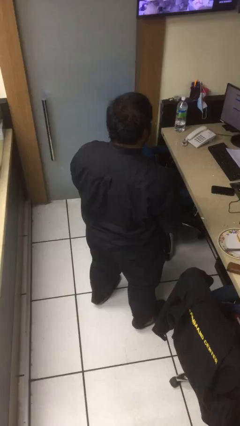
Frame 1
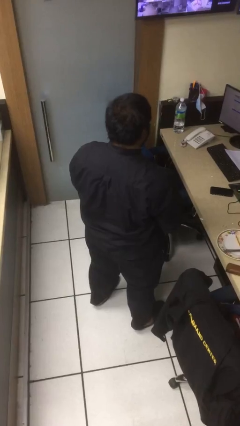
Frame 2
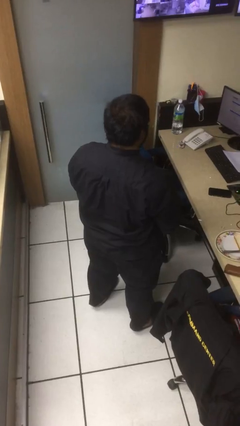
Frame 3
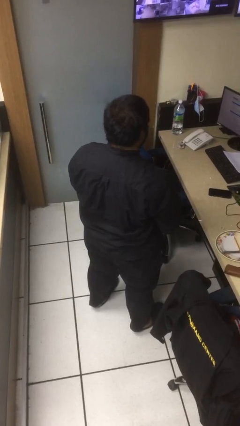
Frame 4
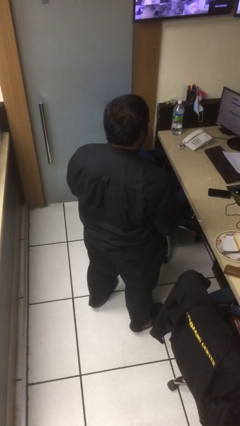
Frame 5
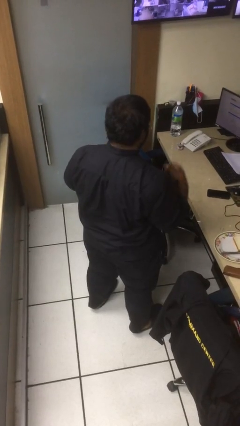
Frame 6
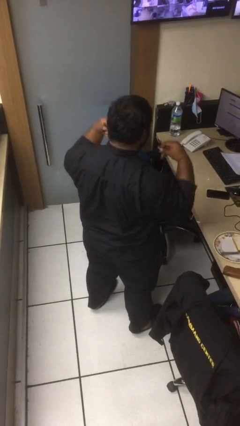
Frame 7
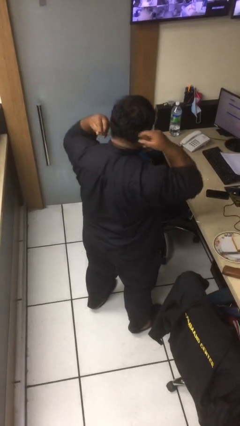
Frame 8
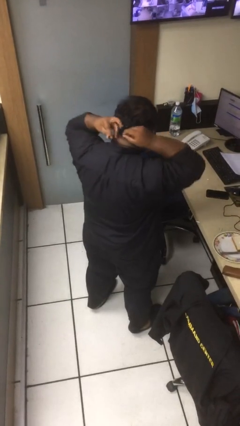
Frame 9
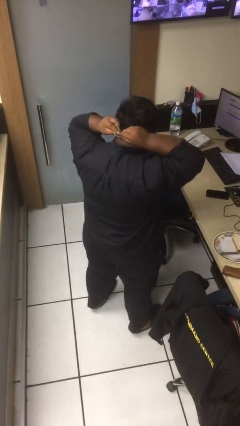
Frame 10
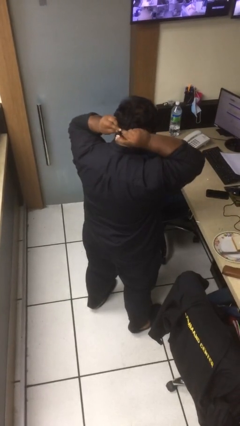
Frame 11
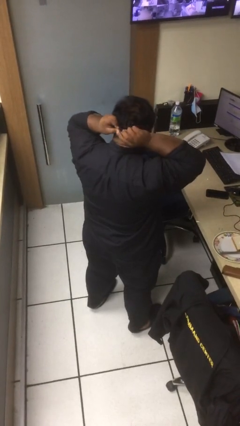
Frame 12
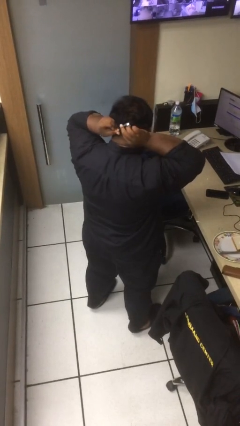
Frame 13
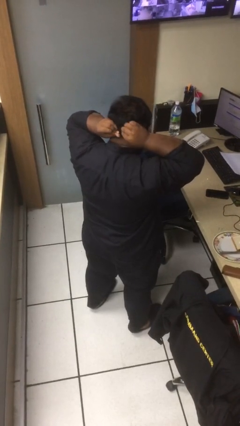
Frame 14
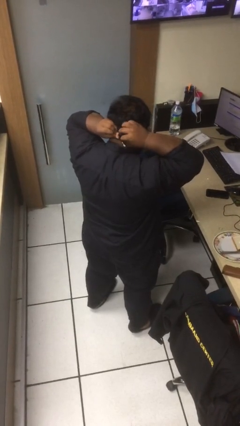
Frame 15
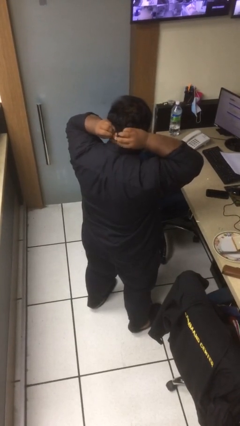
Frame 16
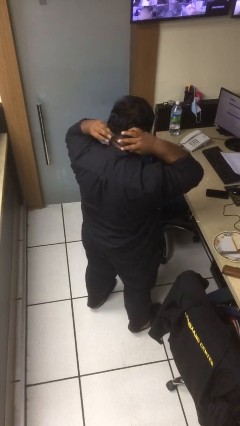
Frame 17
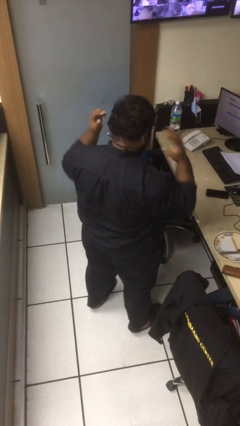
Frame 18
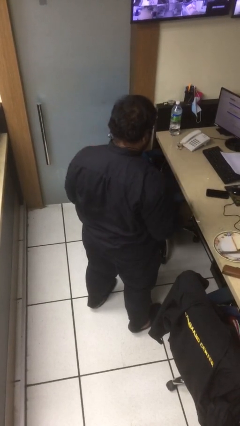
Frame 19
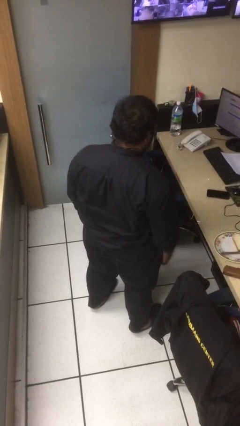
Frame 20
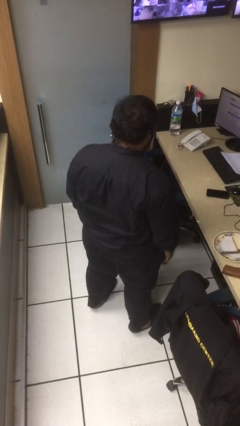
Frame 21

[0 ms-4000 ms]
person puts on necklace

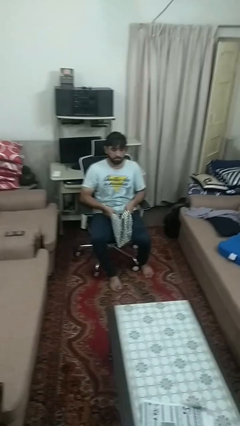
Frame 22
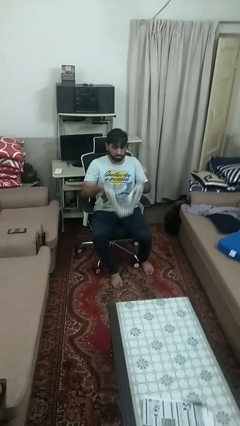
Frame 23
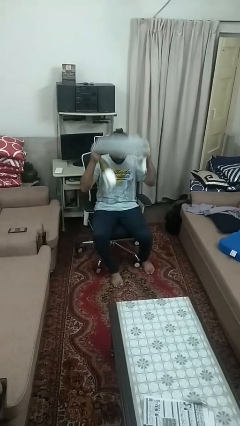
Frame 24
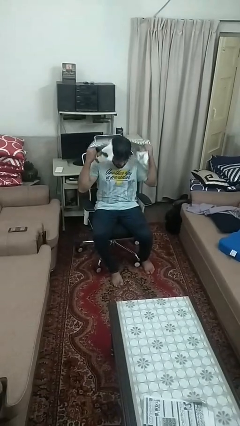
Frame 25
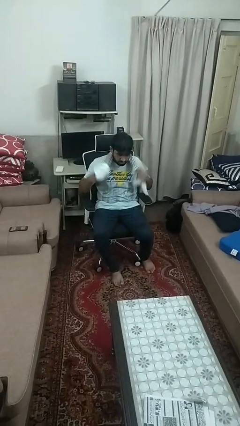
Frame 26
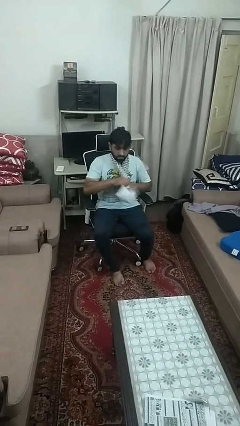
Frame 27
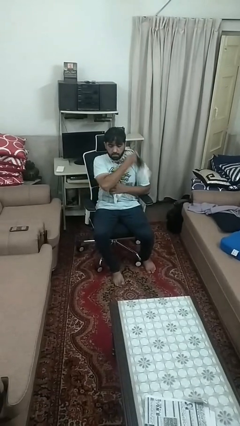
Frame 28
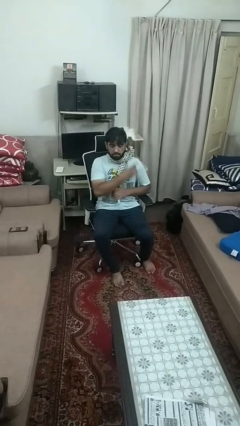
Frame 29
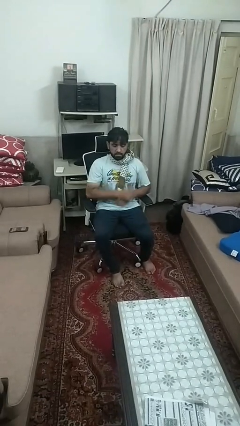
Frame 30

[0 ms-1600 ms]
person puts on scarf

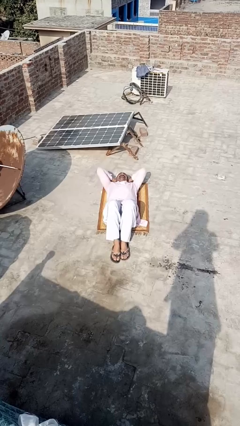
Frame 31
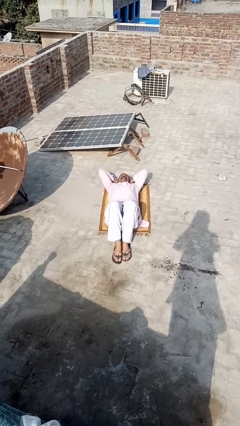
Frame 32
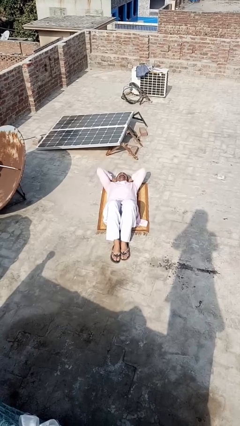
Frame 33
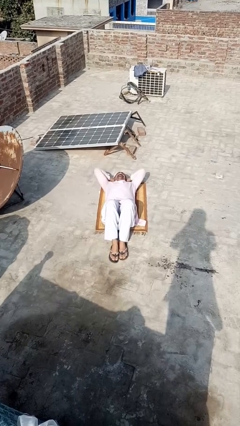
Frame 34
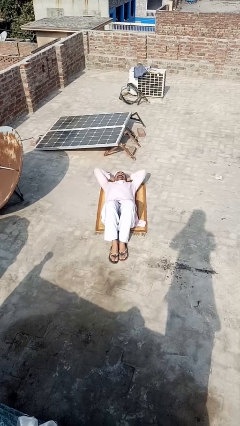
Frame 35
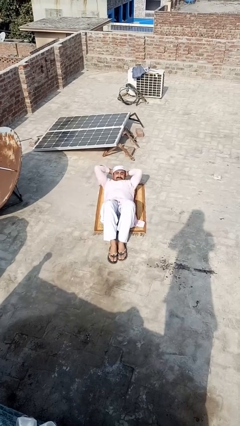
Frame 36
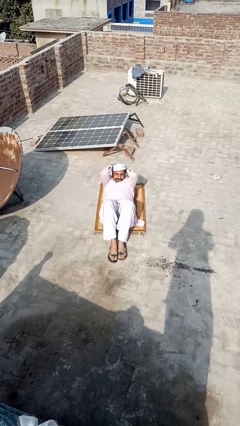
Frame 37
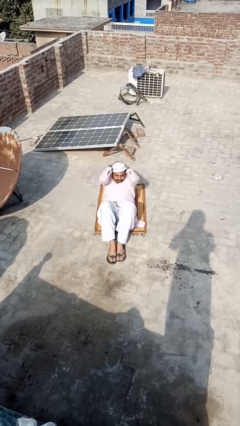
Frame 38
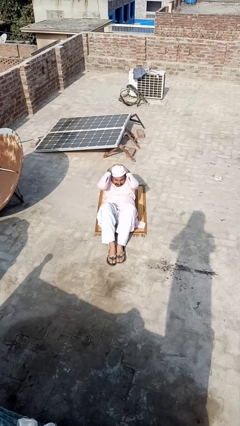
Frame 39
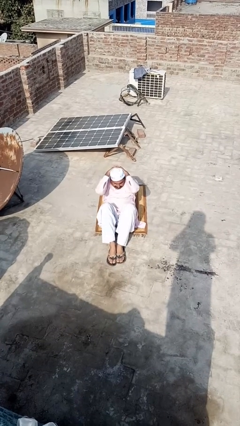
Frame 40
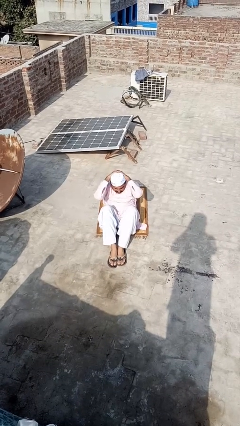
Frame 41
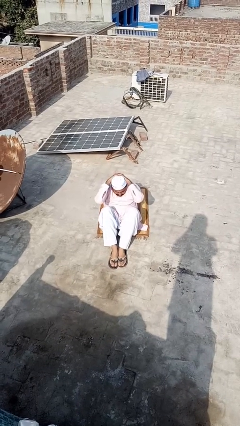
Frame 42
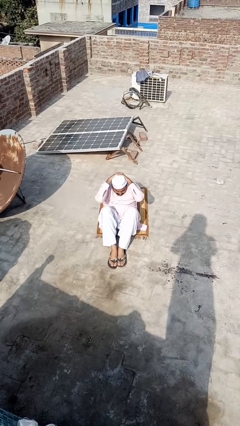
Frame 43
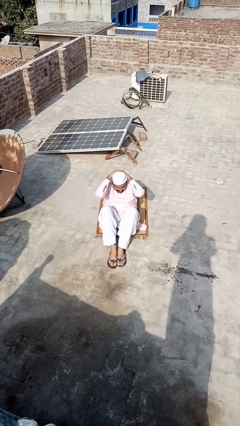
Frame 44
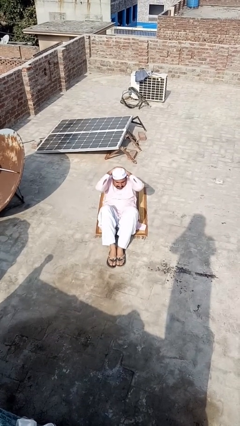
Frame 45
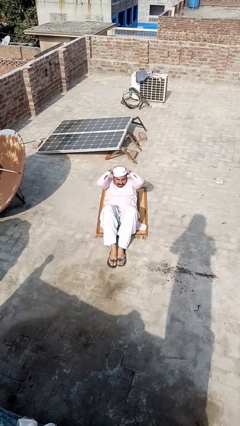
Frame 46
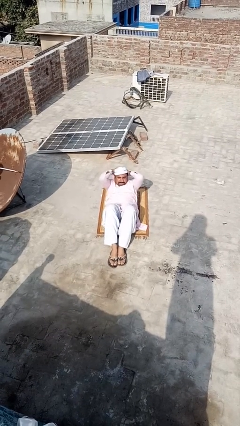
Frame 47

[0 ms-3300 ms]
person exercises with situp

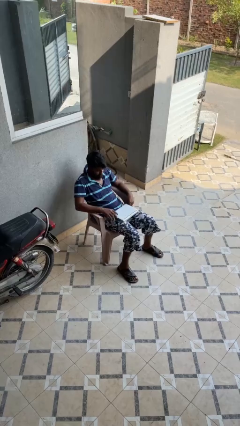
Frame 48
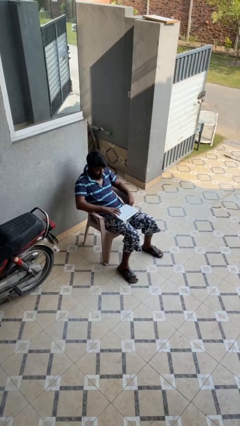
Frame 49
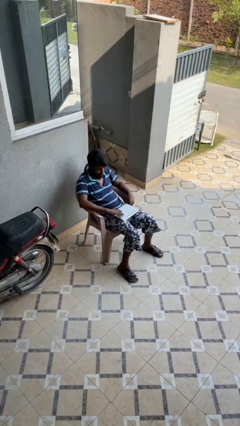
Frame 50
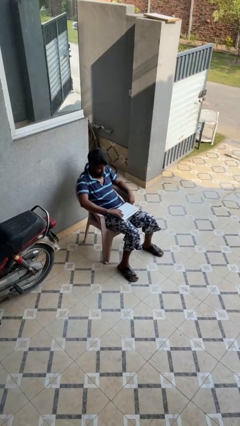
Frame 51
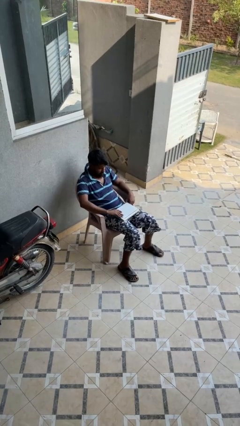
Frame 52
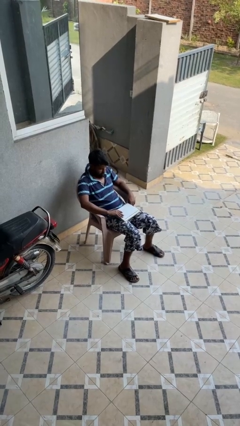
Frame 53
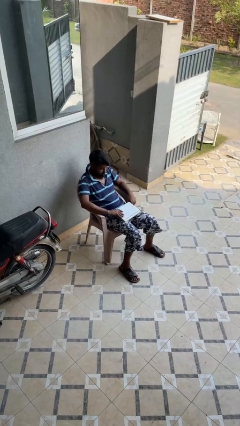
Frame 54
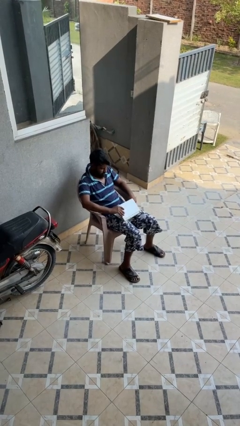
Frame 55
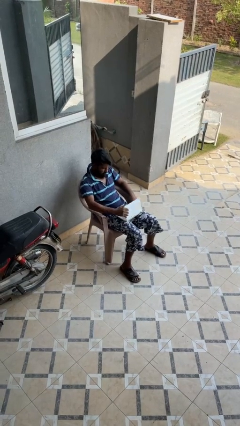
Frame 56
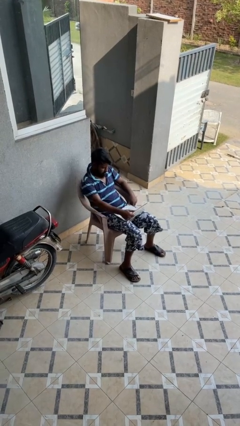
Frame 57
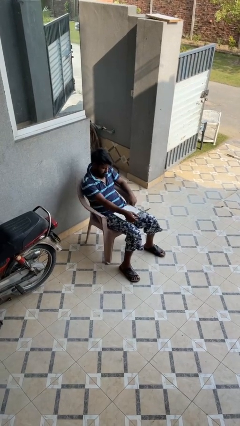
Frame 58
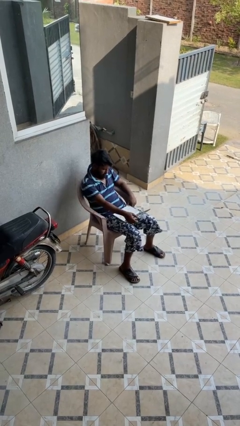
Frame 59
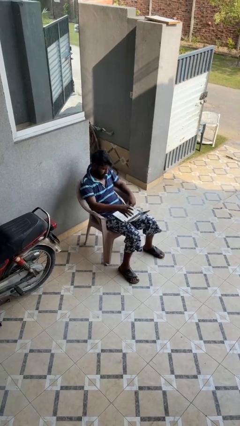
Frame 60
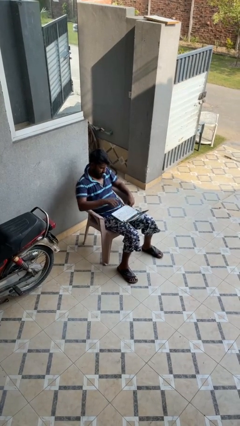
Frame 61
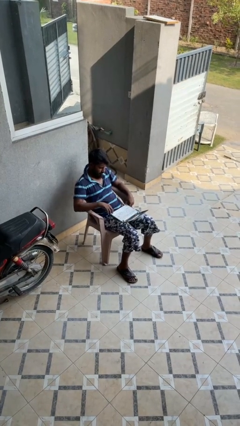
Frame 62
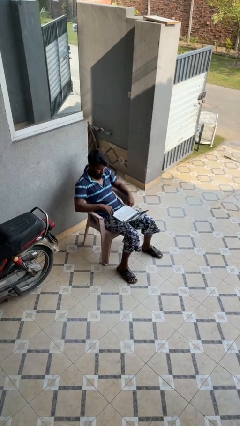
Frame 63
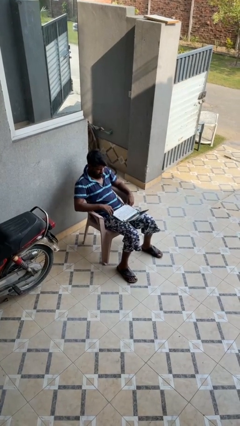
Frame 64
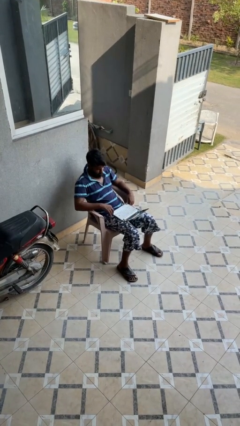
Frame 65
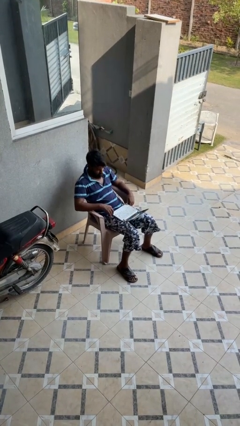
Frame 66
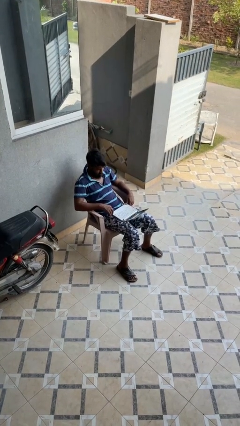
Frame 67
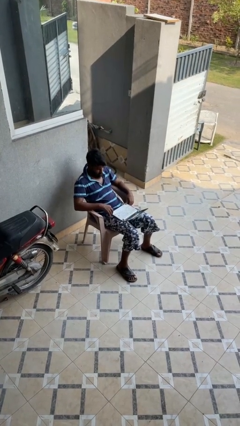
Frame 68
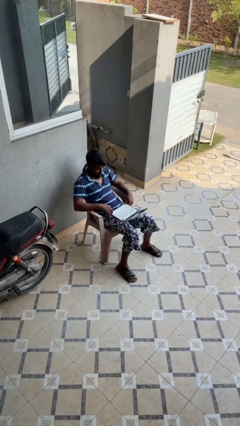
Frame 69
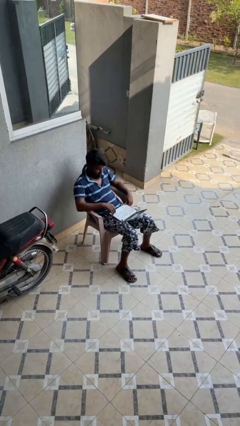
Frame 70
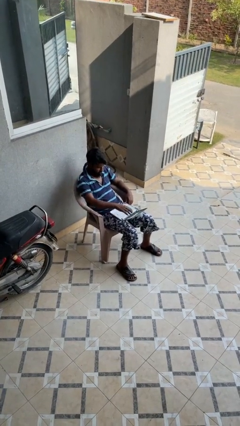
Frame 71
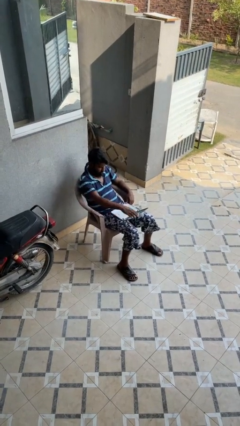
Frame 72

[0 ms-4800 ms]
person opens laptop

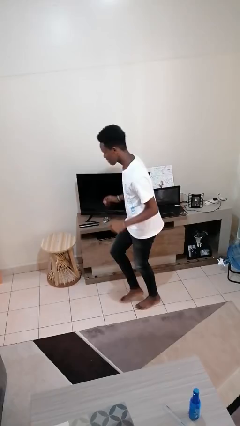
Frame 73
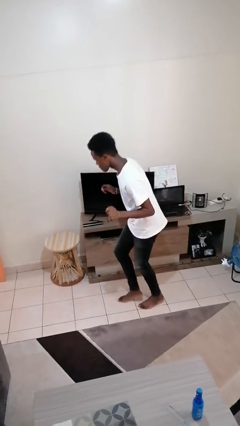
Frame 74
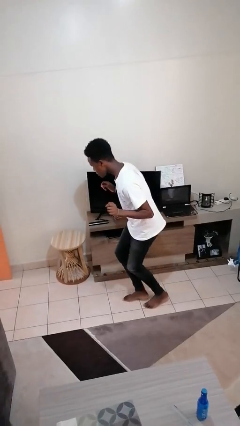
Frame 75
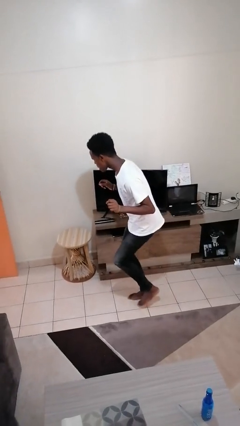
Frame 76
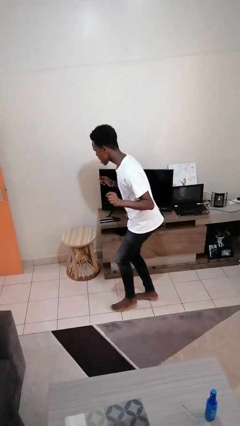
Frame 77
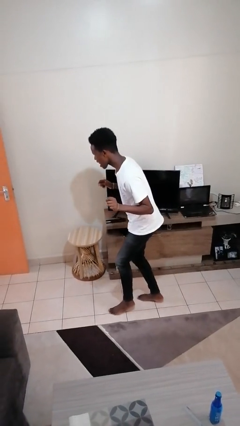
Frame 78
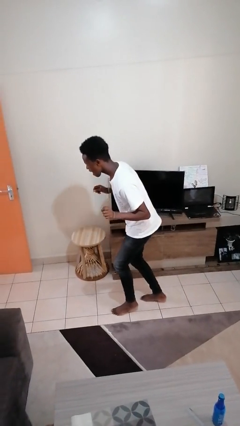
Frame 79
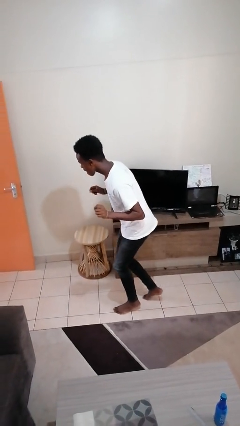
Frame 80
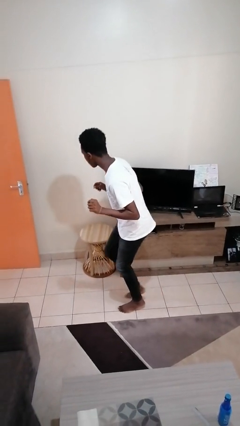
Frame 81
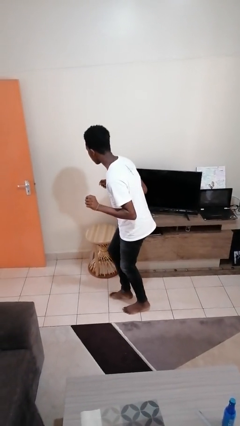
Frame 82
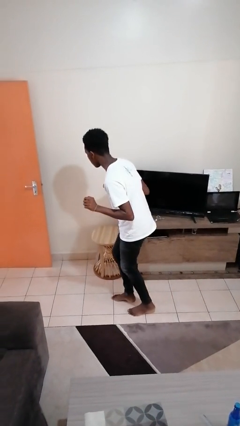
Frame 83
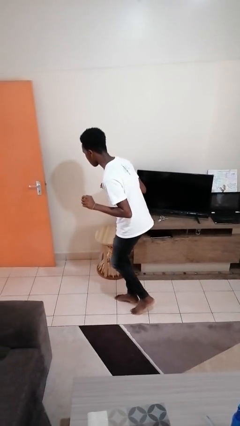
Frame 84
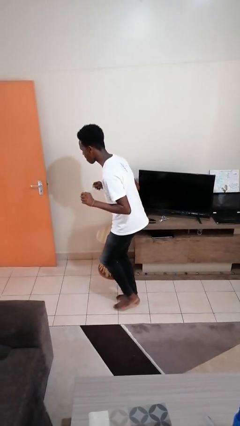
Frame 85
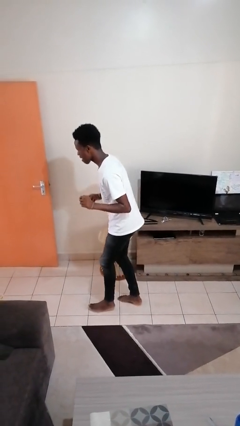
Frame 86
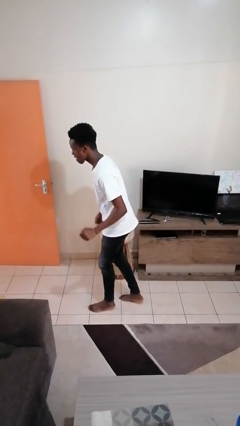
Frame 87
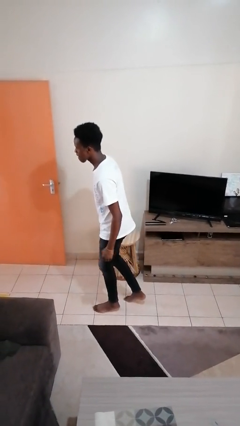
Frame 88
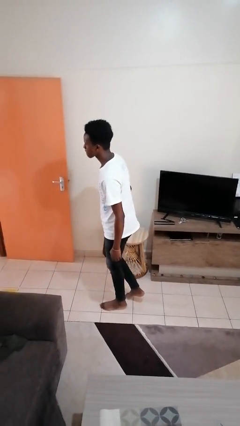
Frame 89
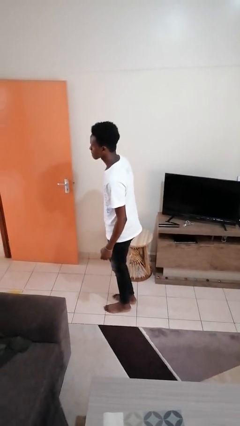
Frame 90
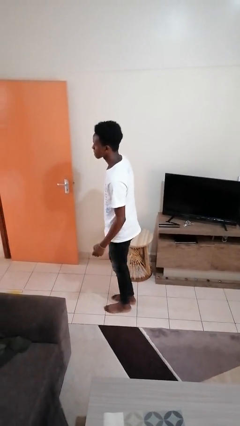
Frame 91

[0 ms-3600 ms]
person walks tiptoe

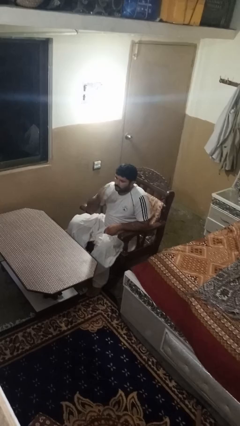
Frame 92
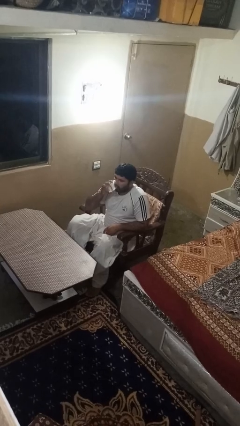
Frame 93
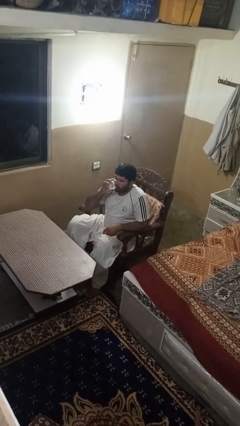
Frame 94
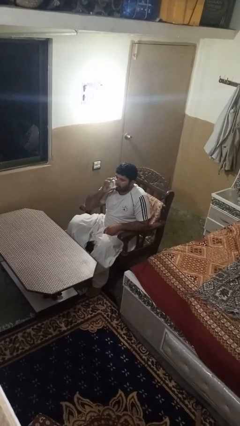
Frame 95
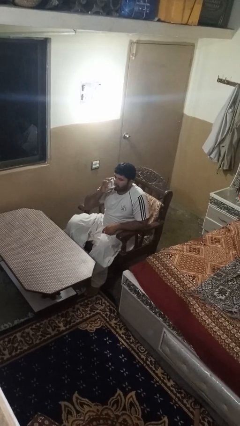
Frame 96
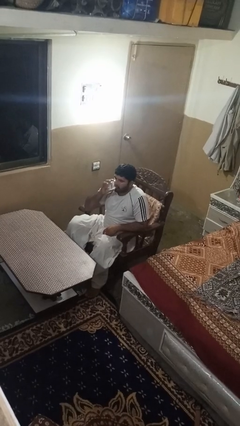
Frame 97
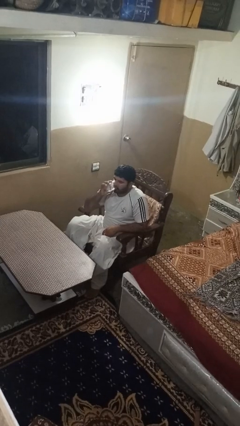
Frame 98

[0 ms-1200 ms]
person drinks from shotglass
